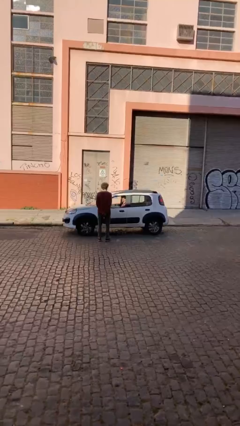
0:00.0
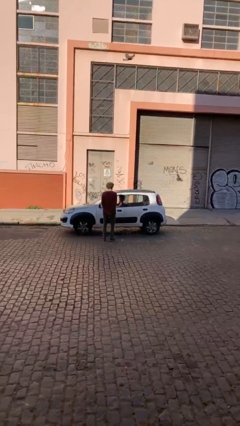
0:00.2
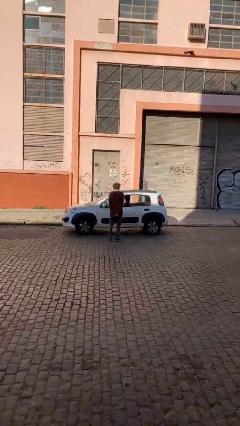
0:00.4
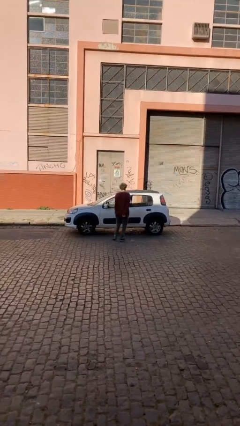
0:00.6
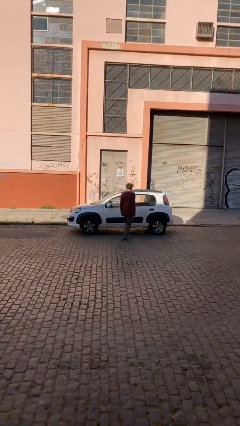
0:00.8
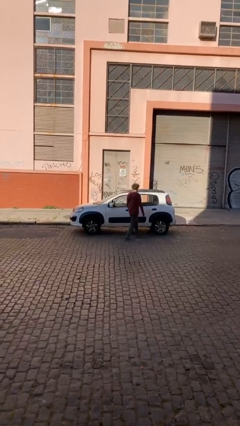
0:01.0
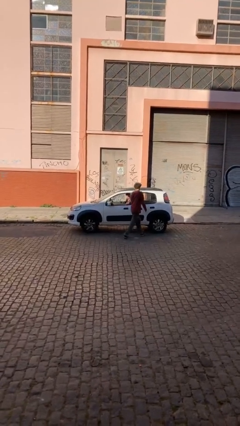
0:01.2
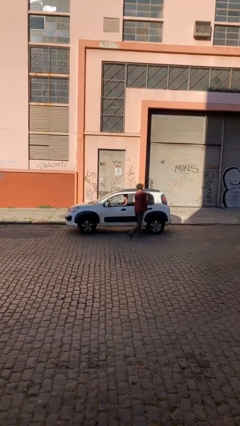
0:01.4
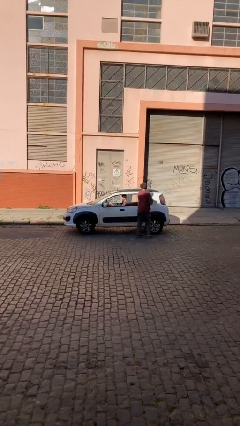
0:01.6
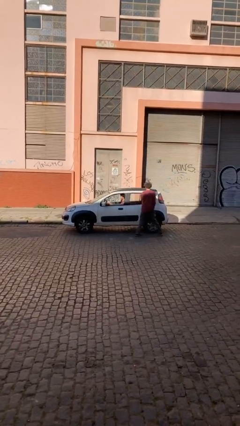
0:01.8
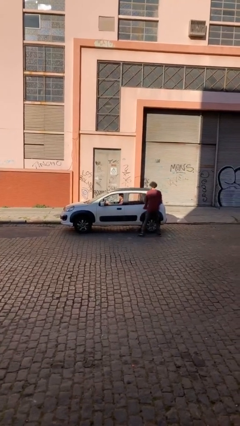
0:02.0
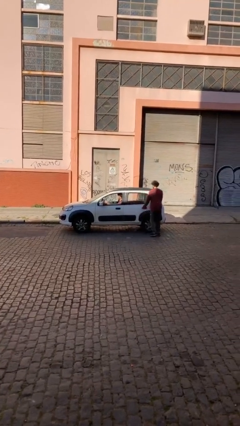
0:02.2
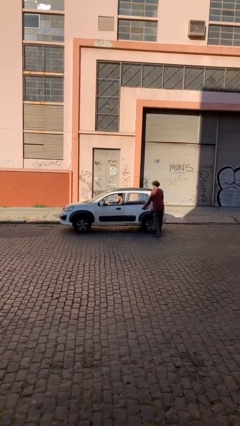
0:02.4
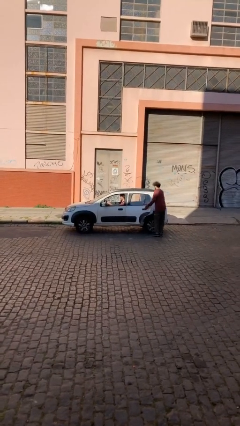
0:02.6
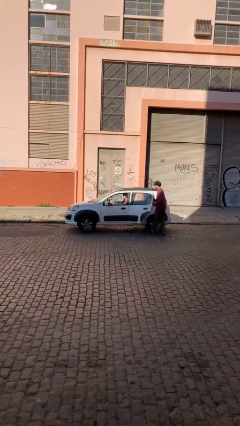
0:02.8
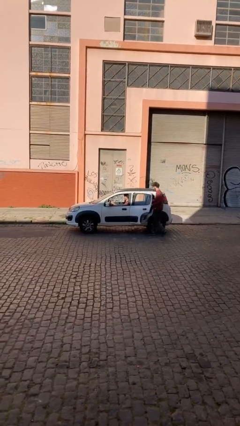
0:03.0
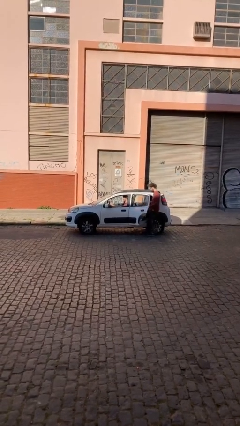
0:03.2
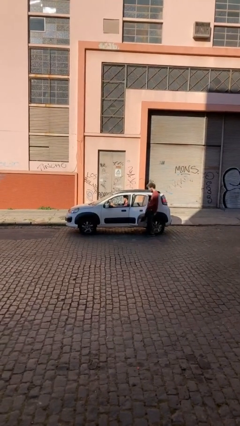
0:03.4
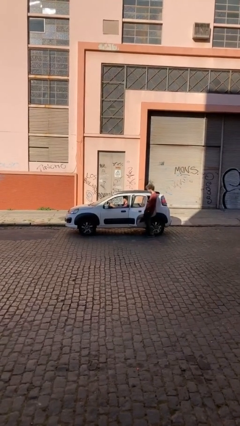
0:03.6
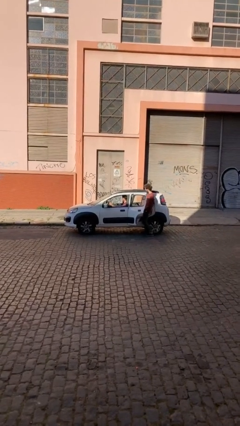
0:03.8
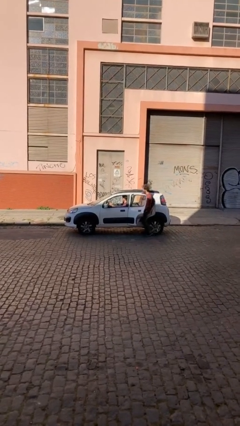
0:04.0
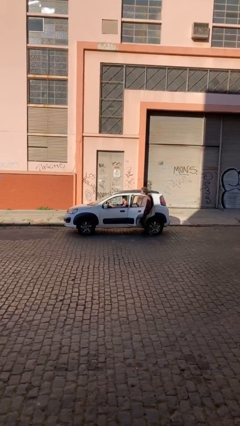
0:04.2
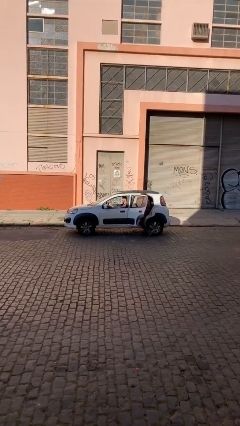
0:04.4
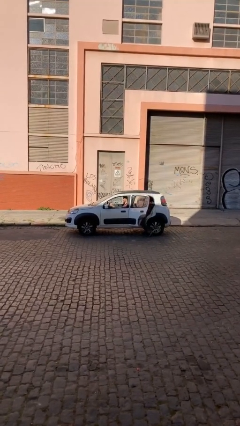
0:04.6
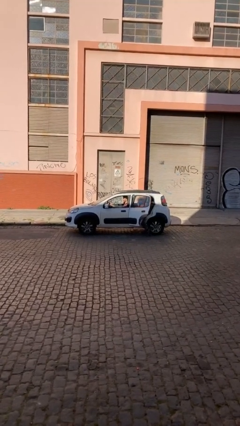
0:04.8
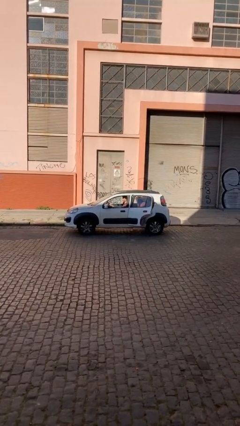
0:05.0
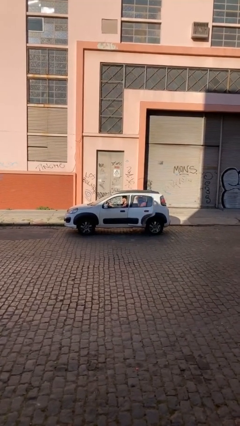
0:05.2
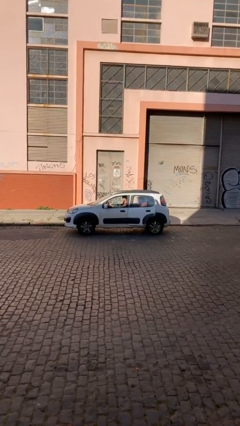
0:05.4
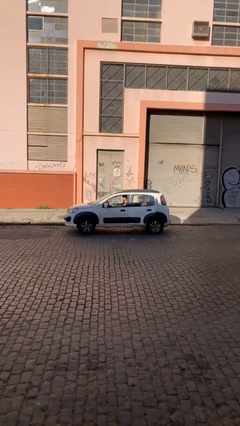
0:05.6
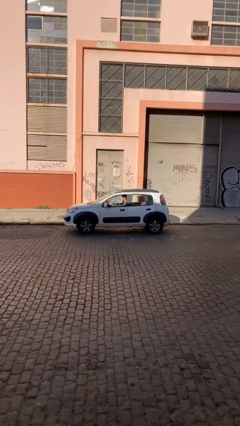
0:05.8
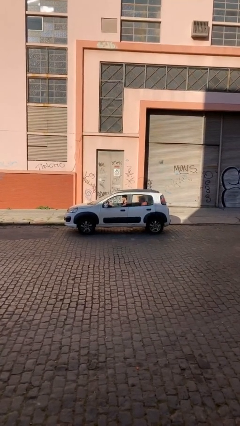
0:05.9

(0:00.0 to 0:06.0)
car picks up person

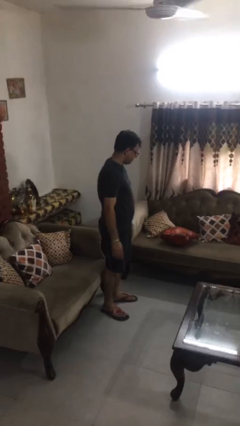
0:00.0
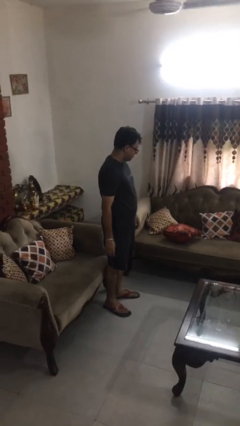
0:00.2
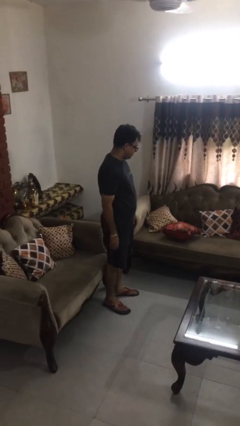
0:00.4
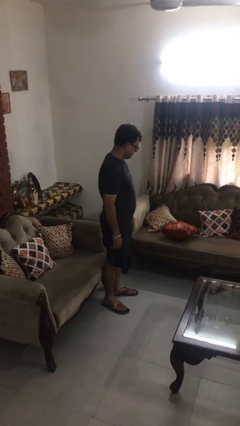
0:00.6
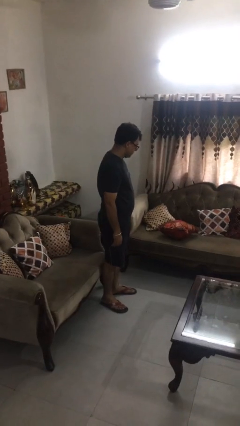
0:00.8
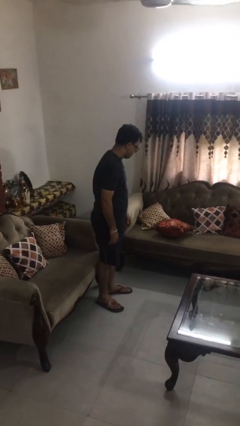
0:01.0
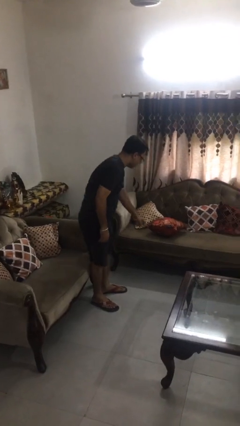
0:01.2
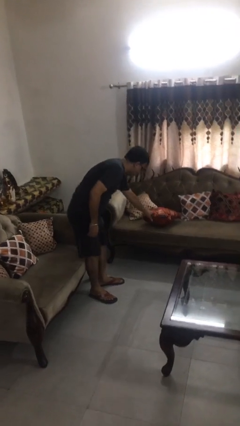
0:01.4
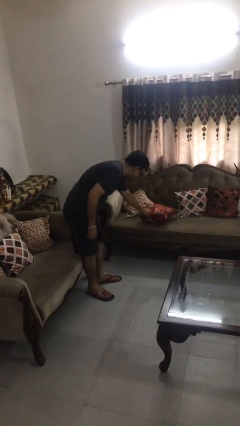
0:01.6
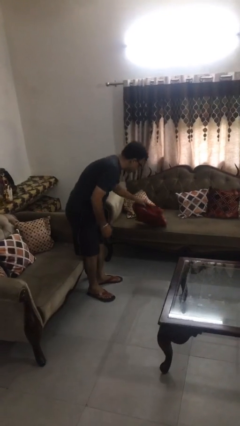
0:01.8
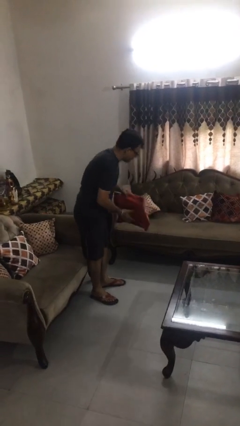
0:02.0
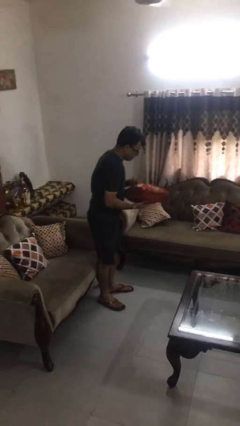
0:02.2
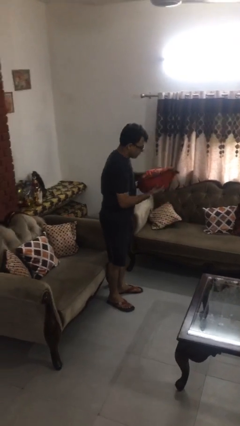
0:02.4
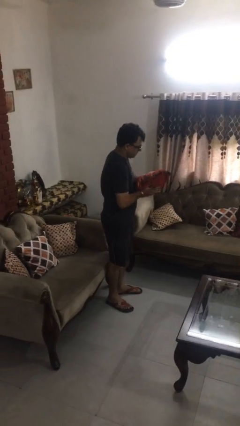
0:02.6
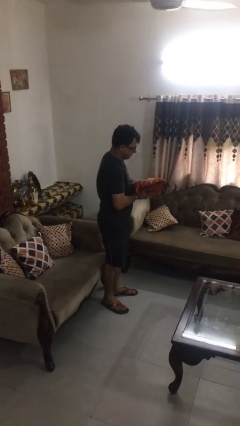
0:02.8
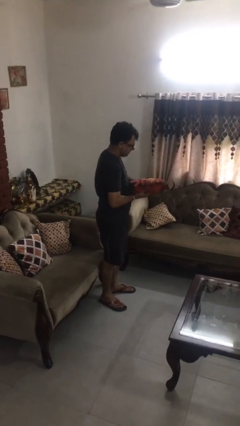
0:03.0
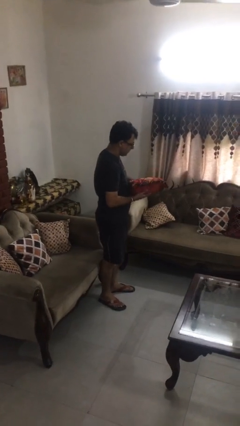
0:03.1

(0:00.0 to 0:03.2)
person picks up object from couch

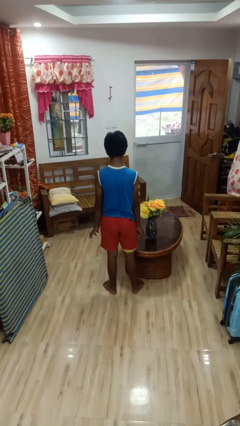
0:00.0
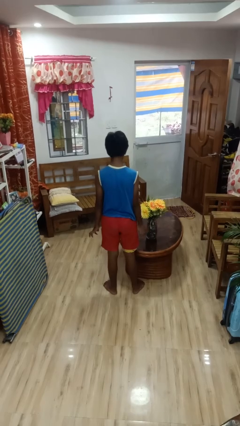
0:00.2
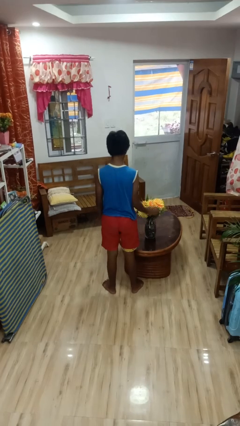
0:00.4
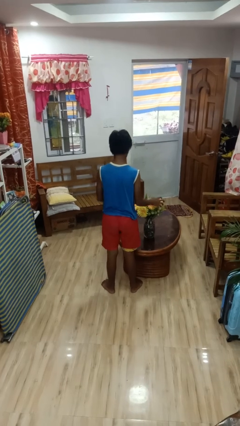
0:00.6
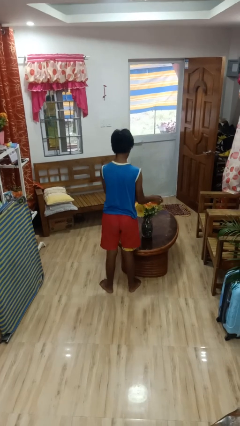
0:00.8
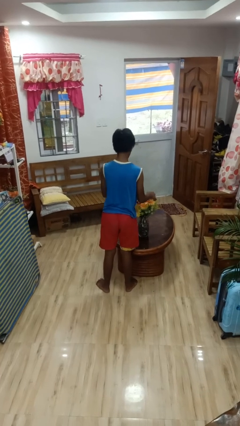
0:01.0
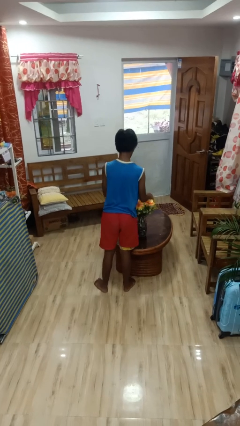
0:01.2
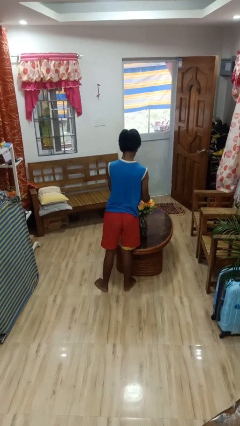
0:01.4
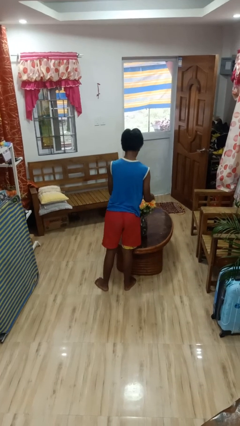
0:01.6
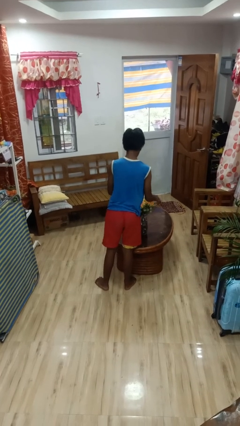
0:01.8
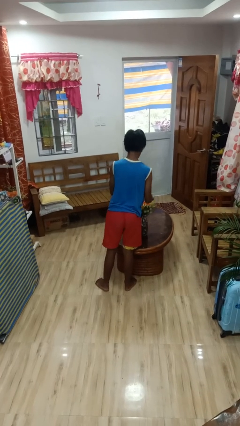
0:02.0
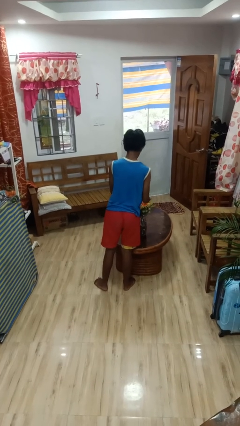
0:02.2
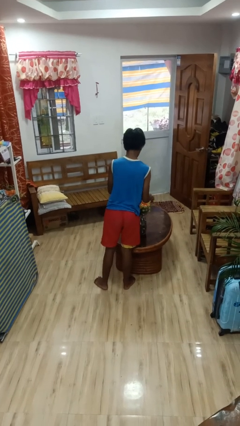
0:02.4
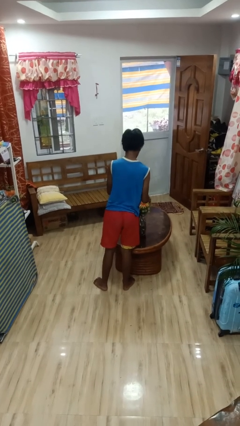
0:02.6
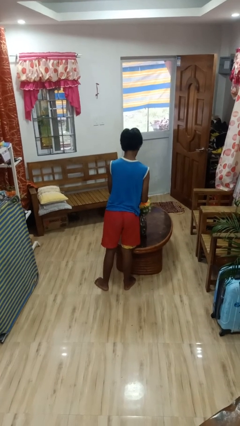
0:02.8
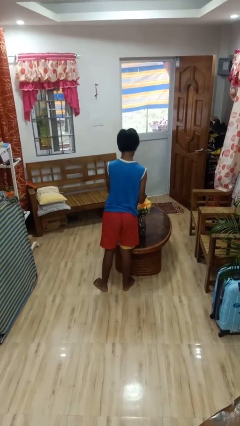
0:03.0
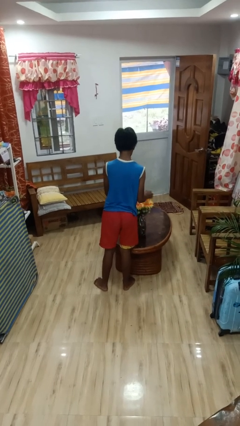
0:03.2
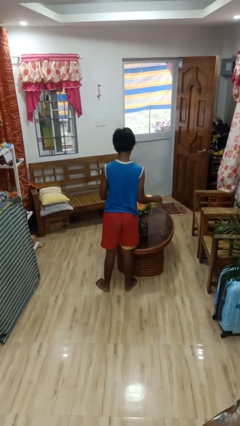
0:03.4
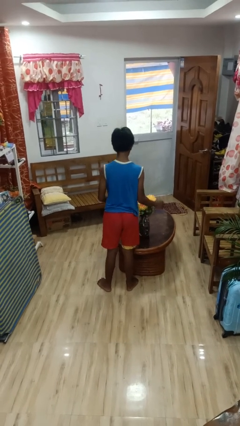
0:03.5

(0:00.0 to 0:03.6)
person arranges flowers in vase

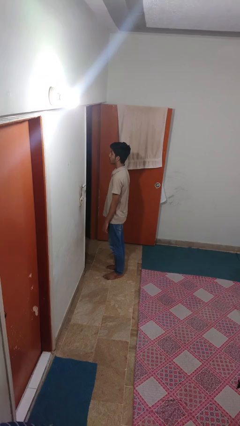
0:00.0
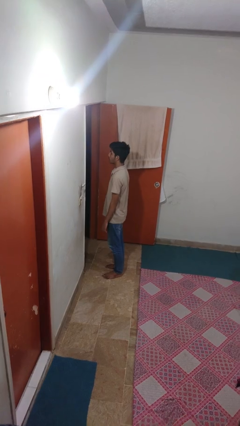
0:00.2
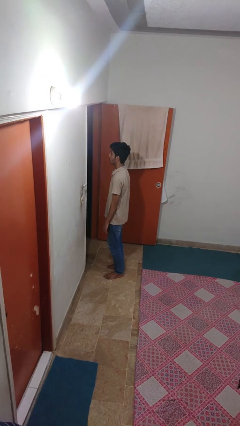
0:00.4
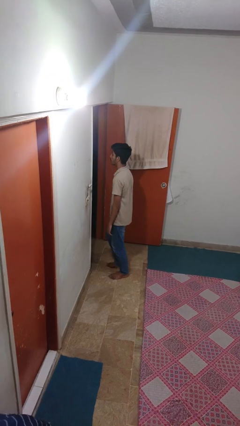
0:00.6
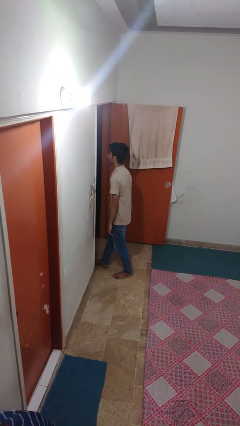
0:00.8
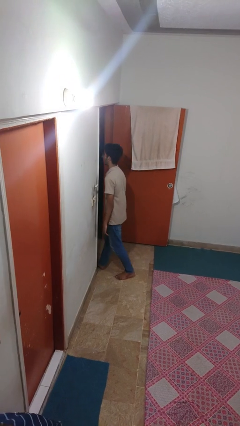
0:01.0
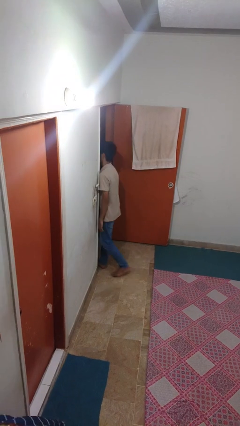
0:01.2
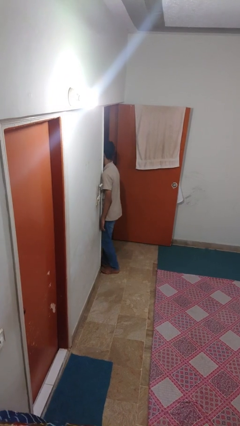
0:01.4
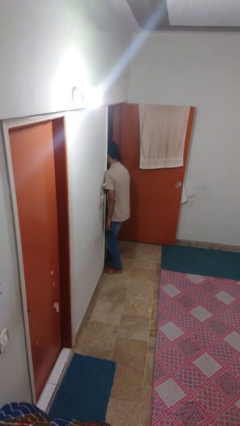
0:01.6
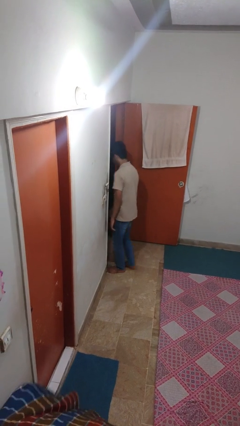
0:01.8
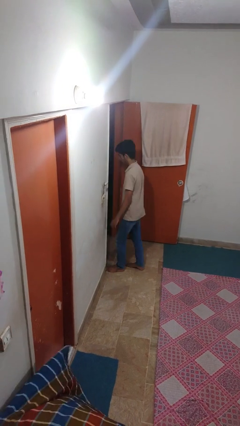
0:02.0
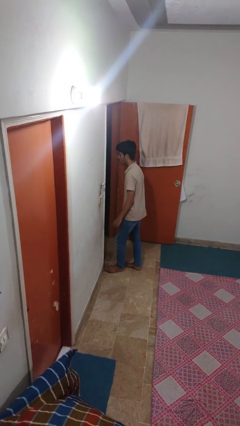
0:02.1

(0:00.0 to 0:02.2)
person bumps into wall

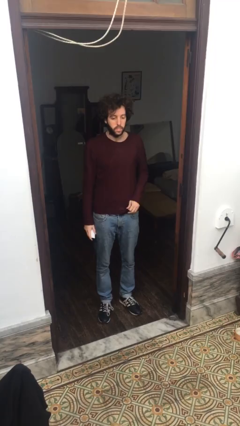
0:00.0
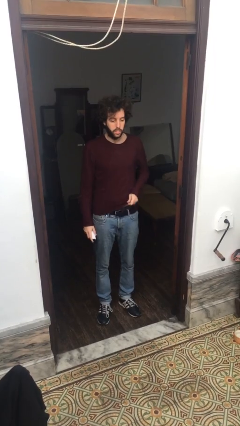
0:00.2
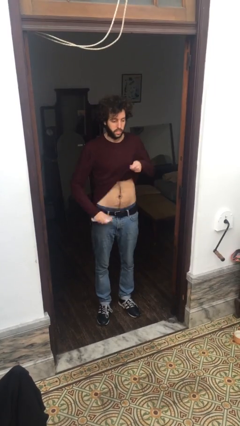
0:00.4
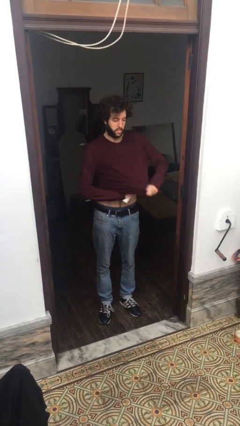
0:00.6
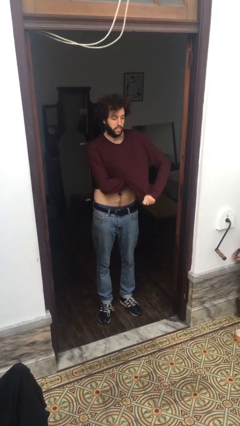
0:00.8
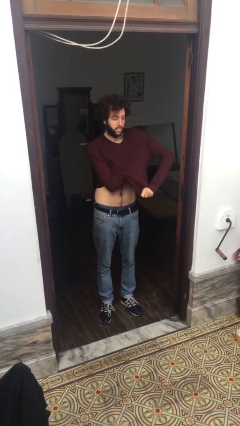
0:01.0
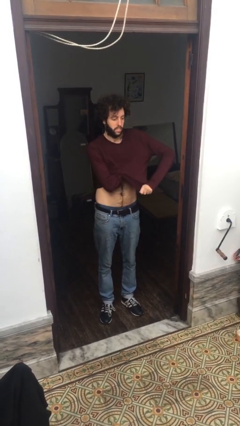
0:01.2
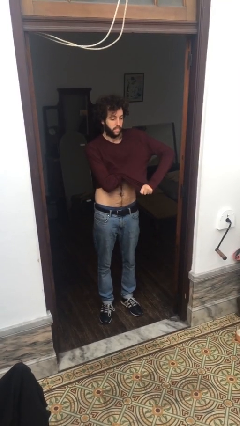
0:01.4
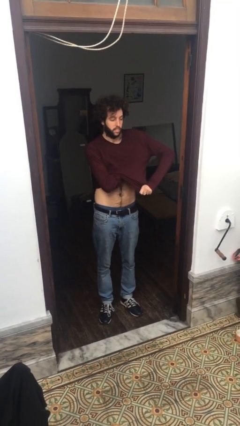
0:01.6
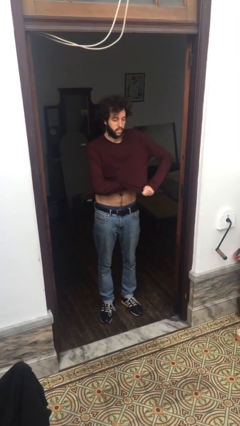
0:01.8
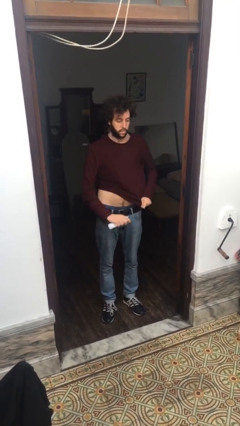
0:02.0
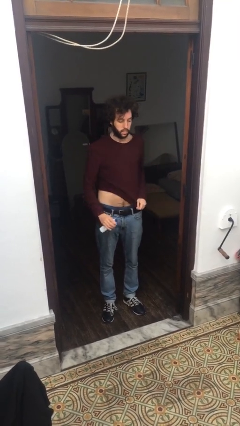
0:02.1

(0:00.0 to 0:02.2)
person applies deodorant
